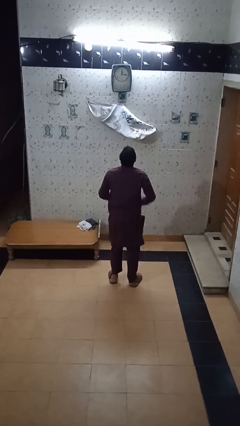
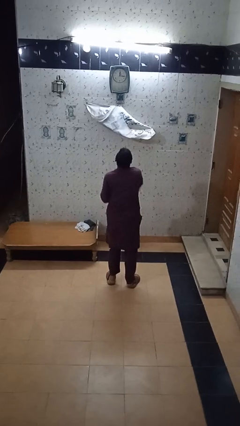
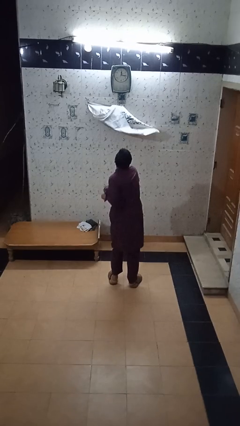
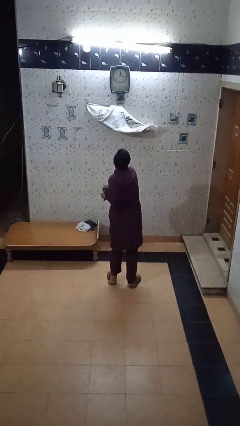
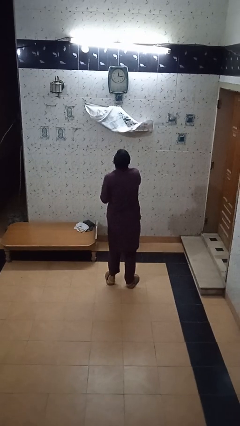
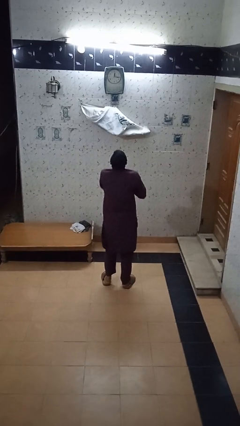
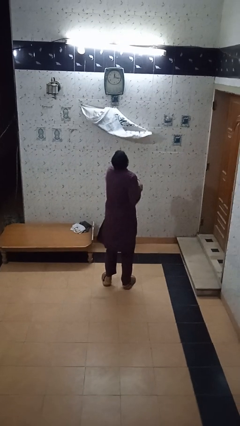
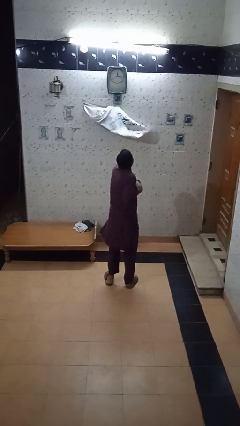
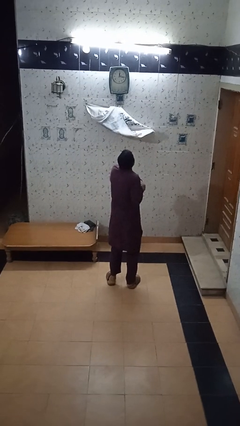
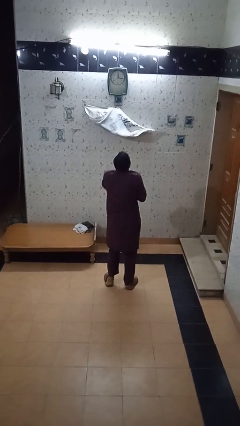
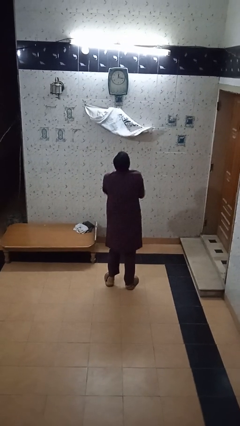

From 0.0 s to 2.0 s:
person stretches arms to side

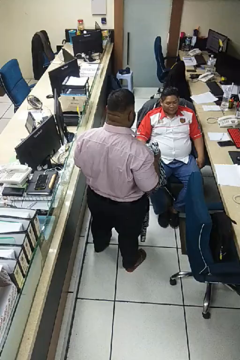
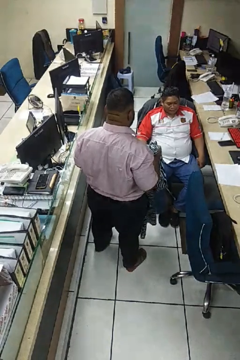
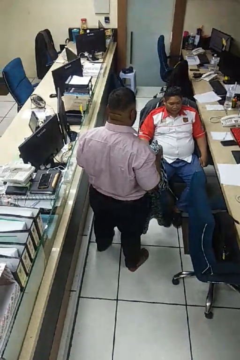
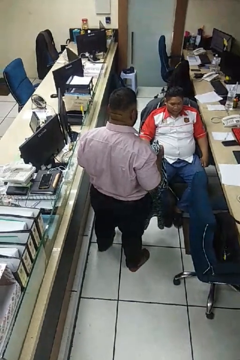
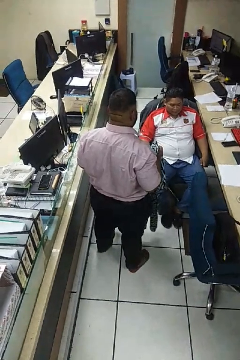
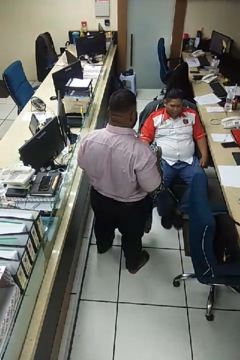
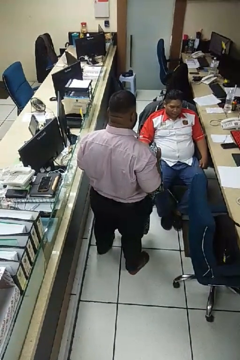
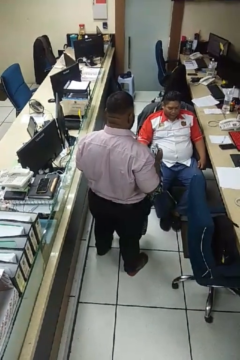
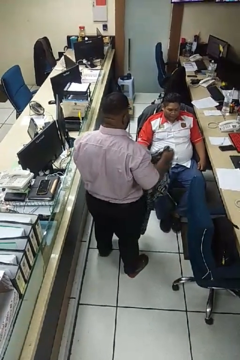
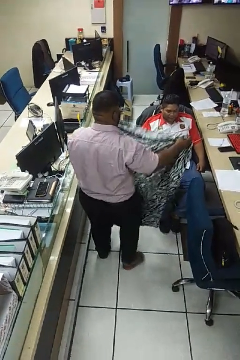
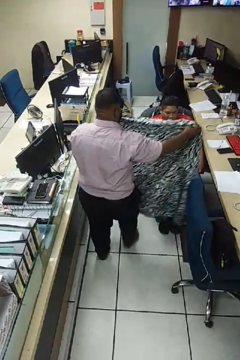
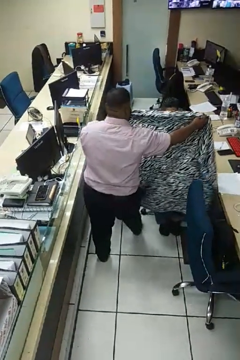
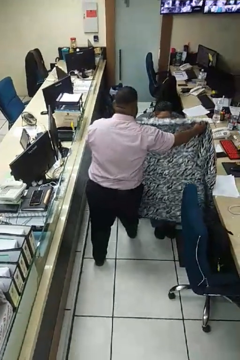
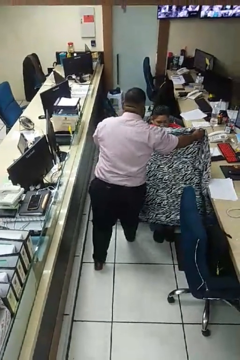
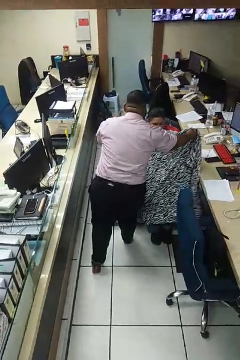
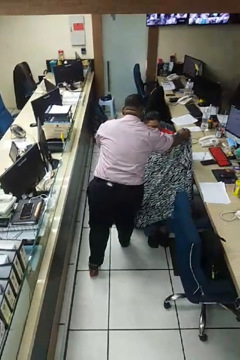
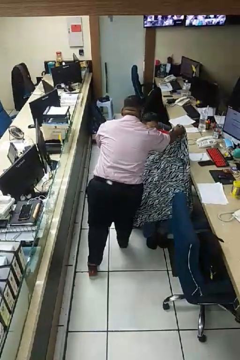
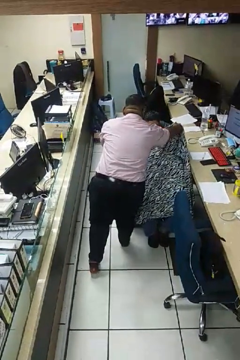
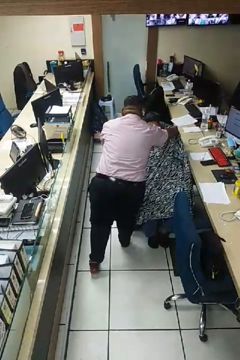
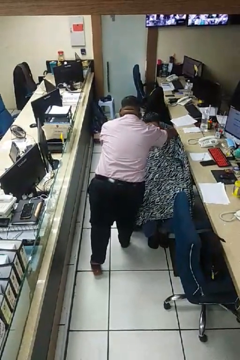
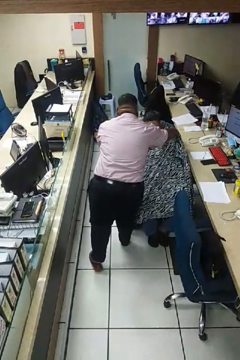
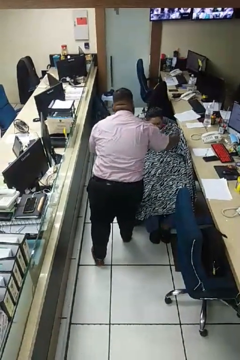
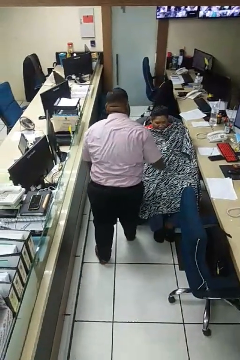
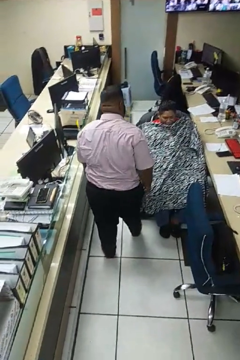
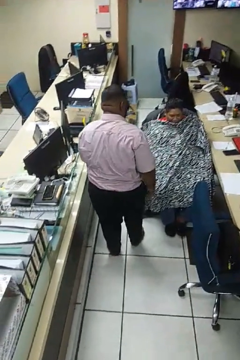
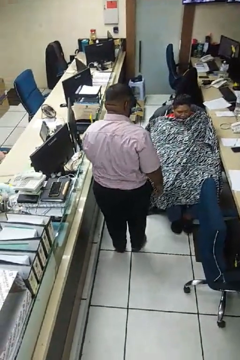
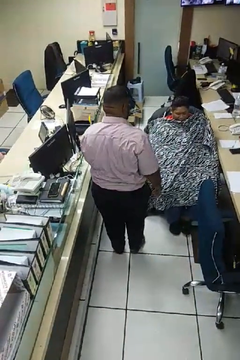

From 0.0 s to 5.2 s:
person covers friend with blanket

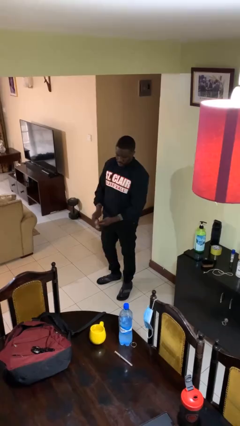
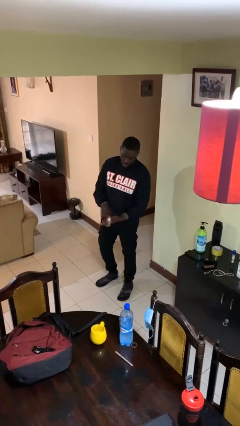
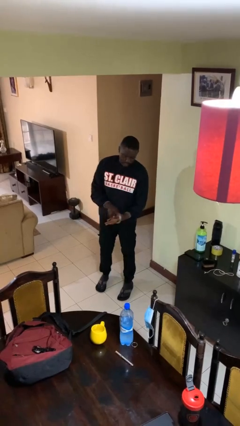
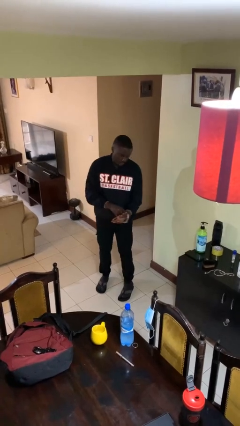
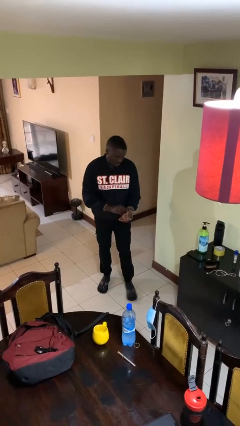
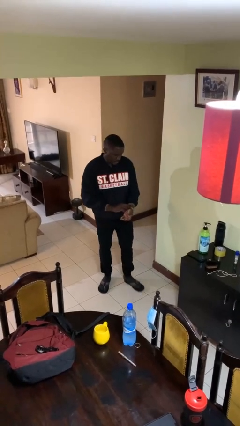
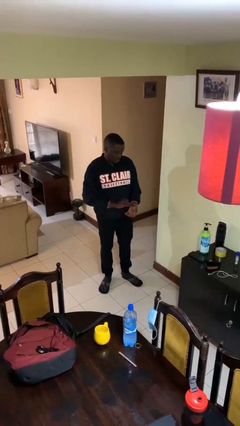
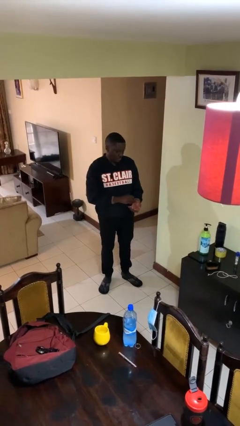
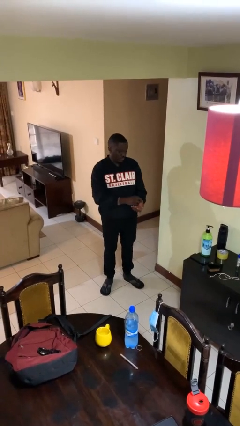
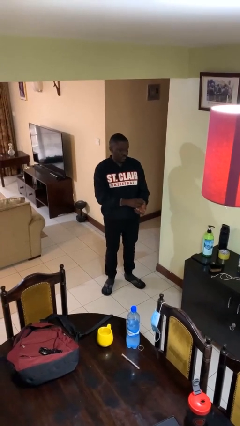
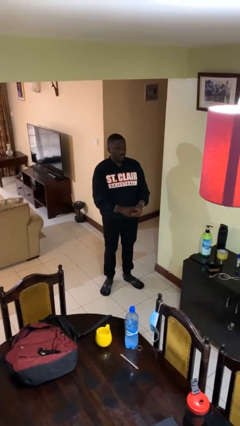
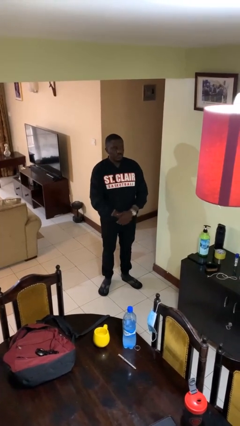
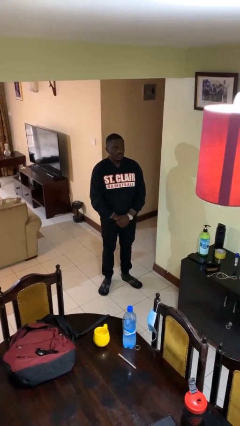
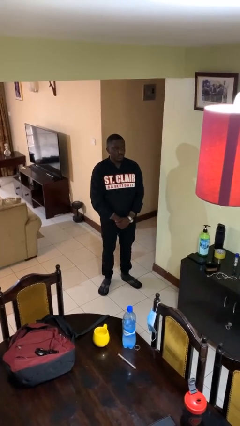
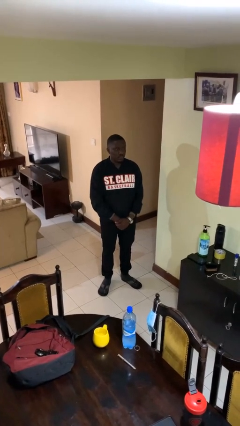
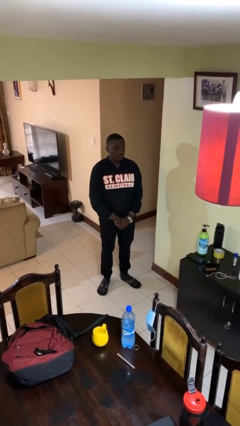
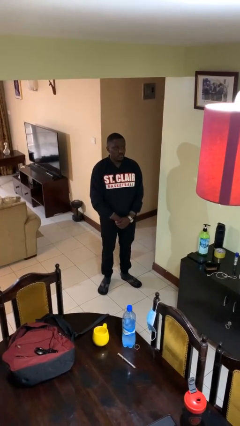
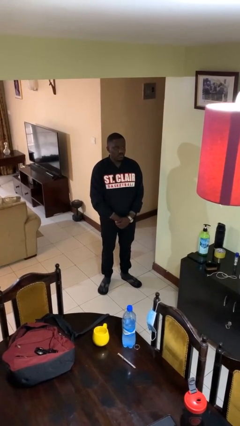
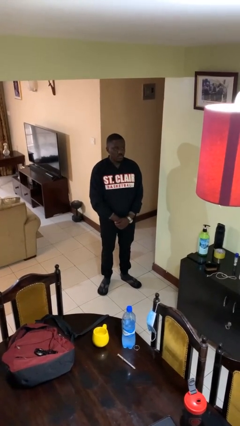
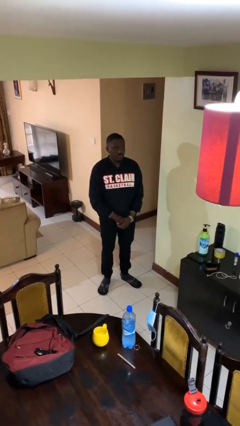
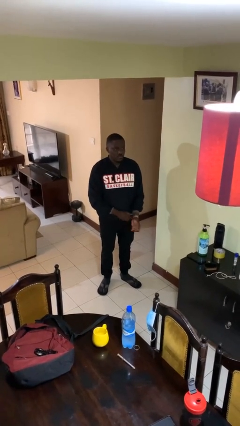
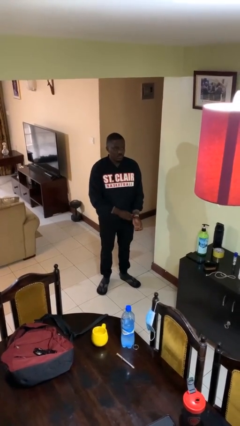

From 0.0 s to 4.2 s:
person puts on wristwatch

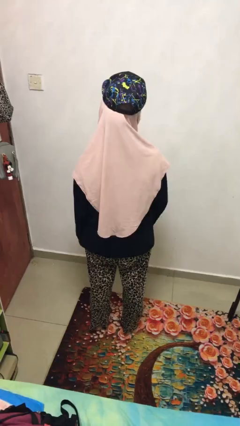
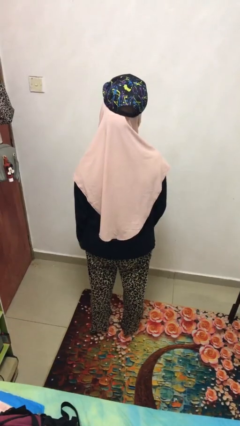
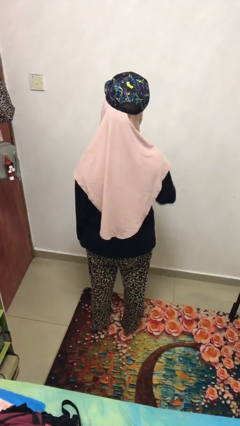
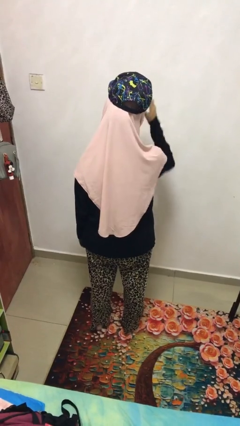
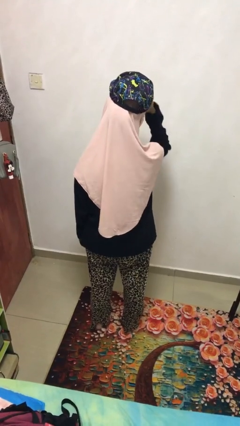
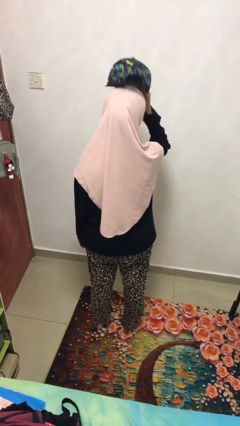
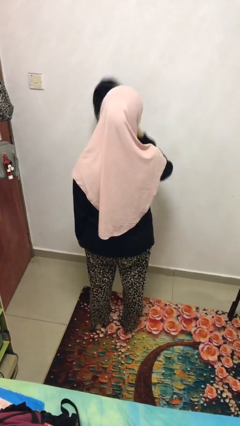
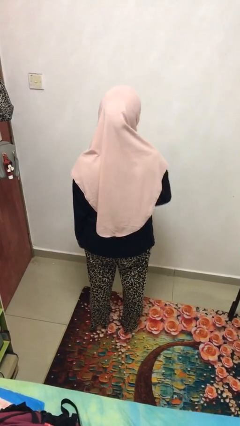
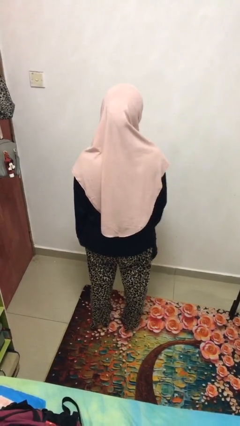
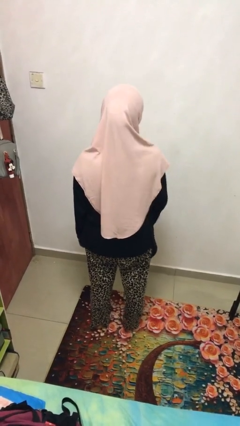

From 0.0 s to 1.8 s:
person takes off hat

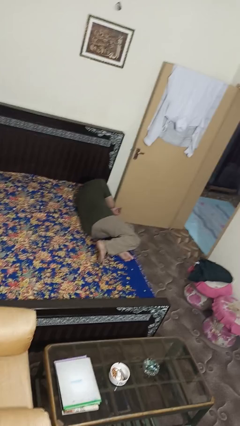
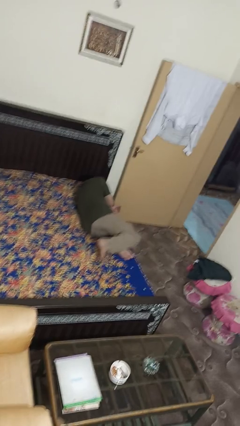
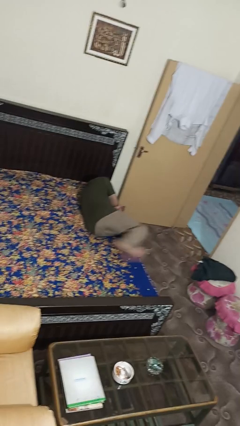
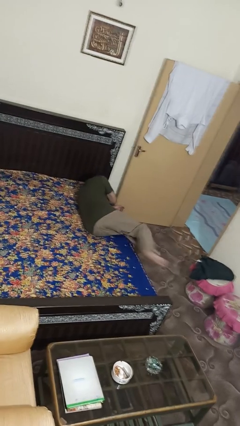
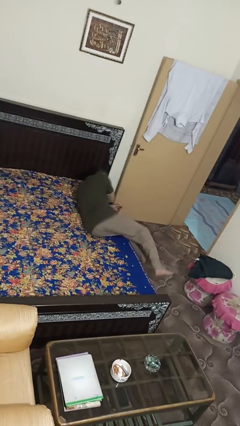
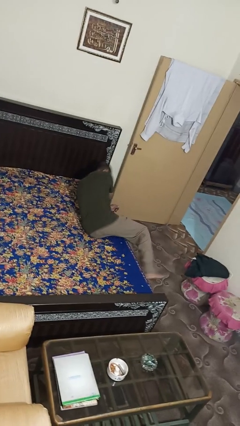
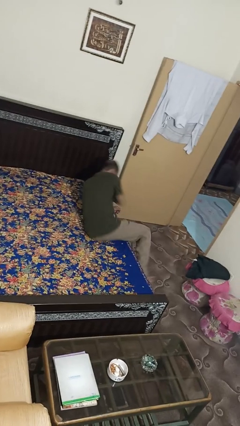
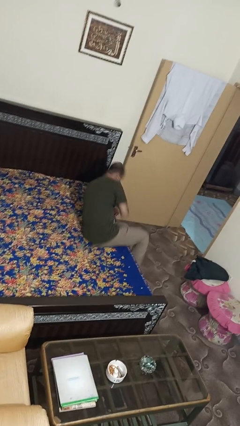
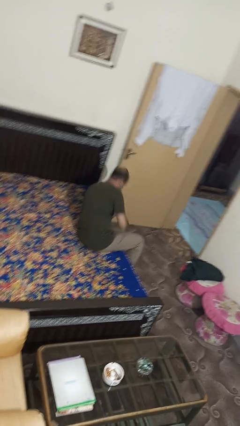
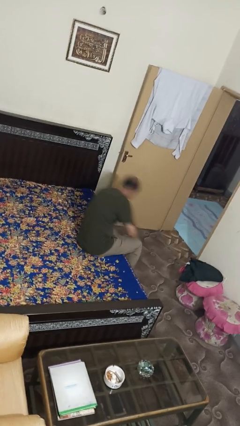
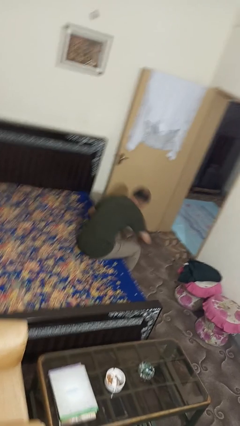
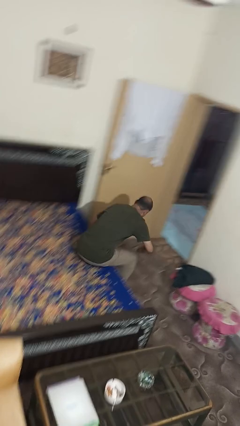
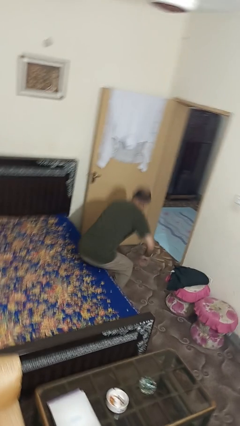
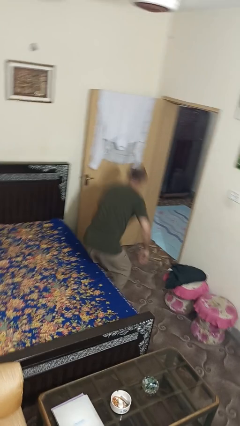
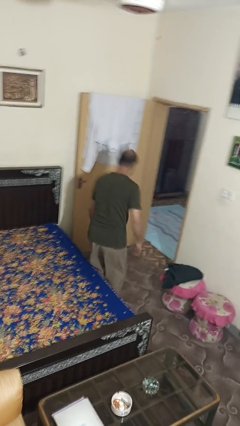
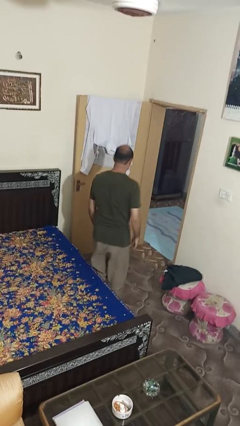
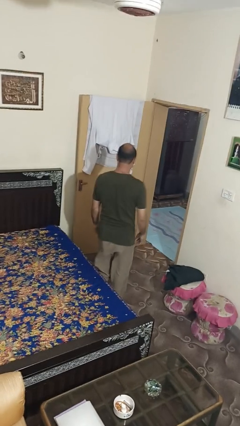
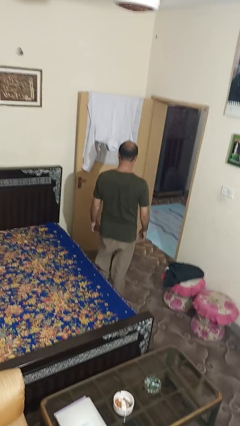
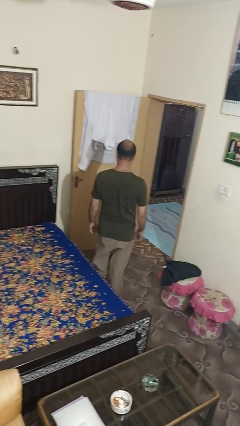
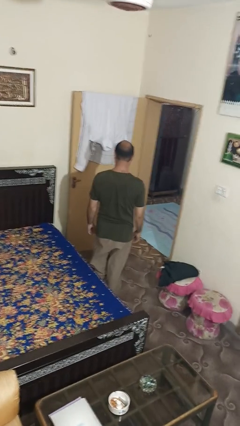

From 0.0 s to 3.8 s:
person stands up

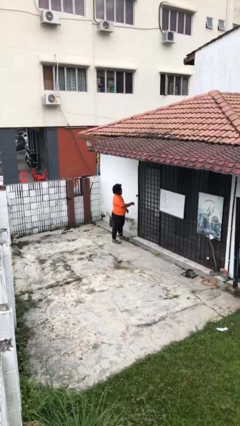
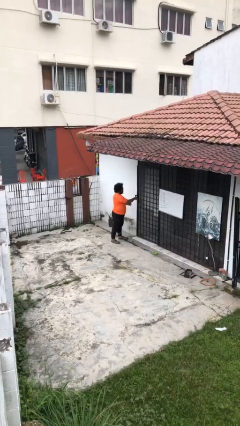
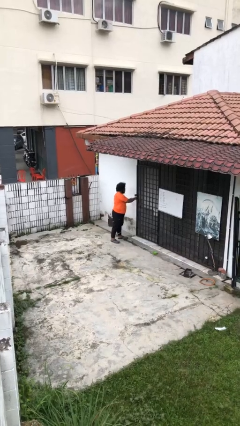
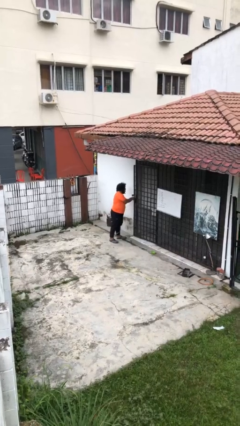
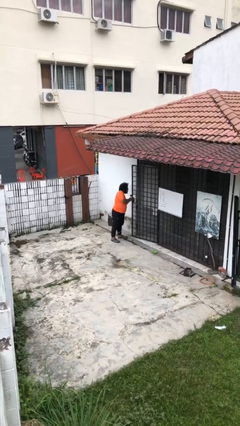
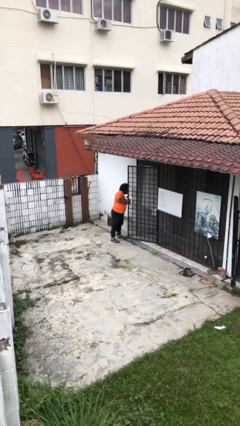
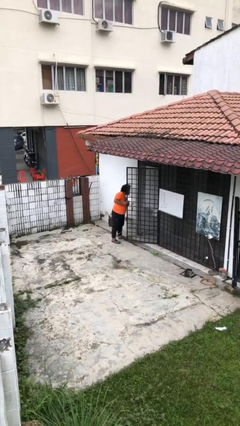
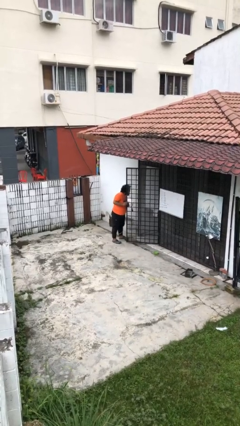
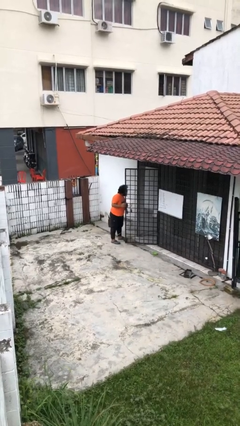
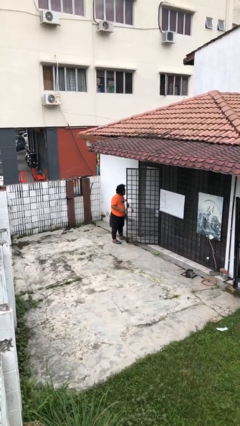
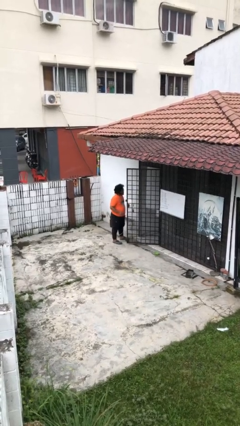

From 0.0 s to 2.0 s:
person opens facility door
